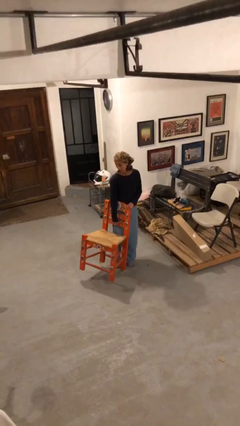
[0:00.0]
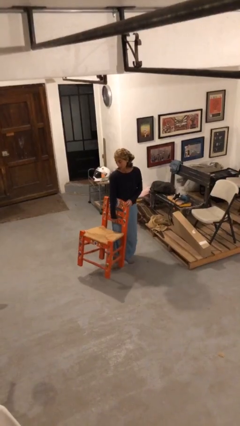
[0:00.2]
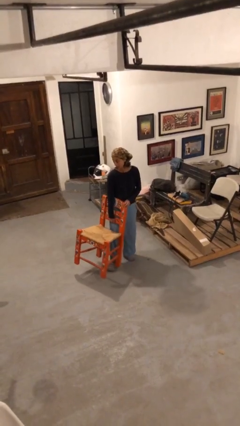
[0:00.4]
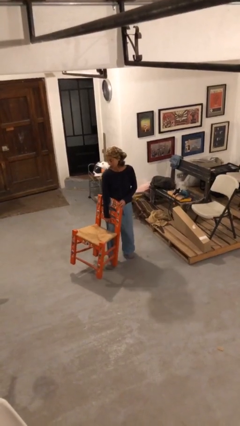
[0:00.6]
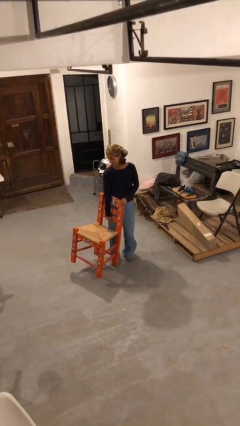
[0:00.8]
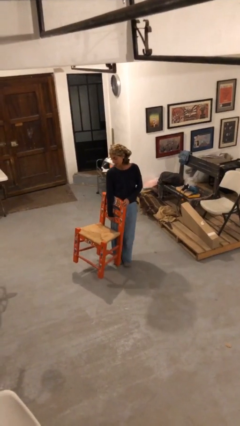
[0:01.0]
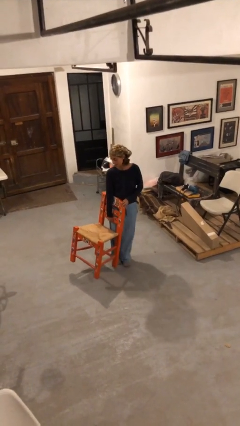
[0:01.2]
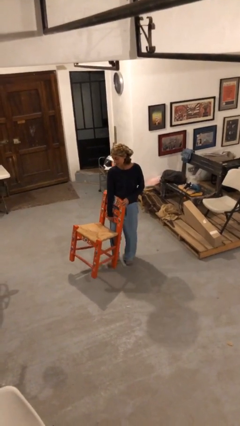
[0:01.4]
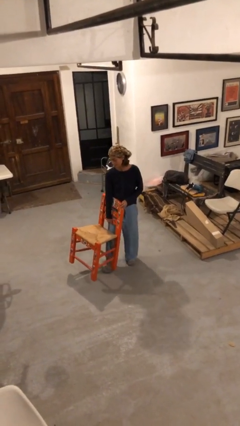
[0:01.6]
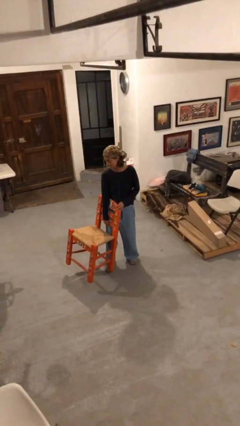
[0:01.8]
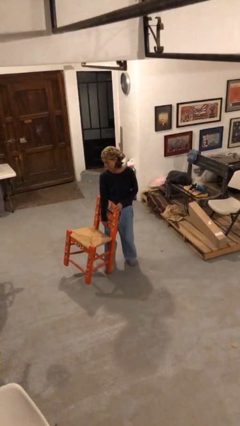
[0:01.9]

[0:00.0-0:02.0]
person carries heavy object

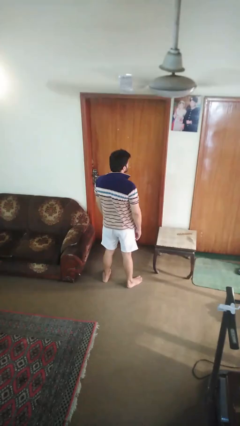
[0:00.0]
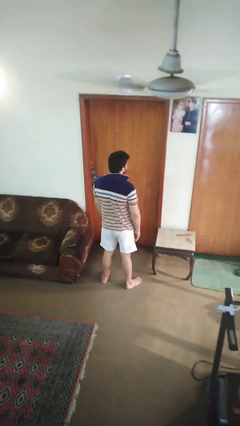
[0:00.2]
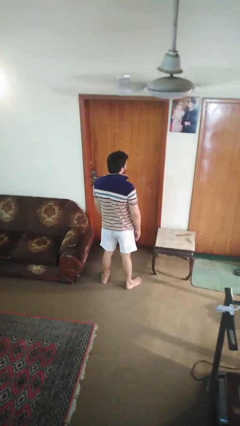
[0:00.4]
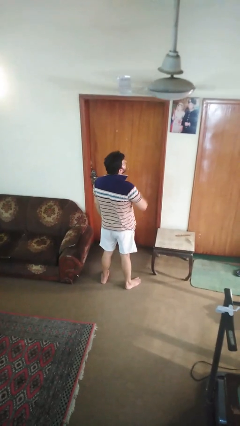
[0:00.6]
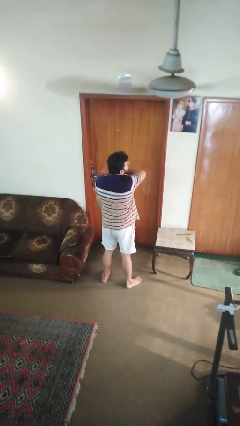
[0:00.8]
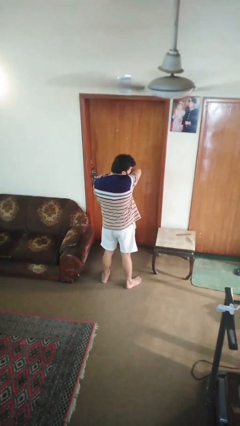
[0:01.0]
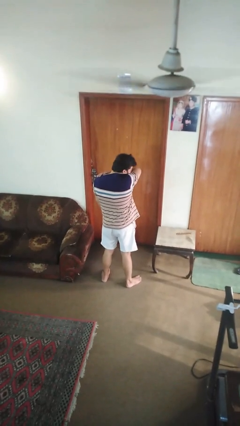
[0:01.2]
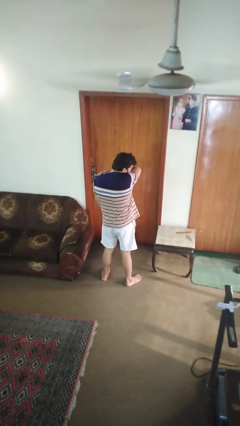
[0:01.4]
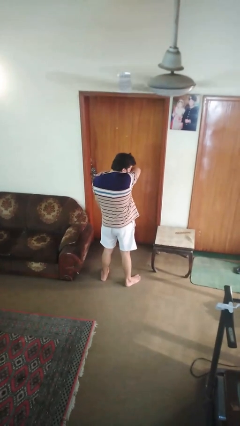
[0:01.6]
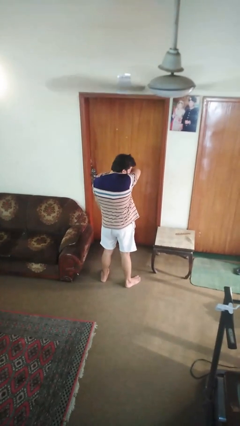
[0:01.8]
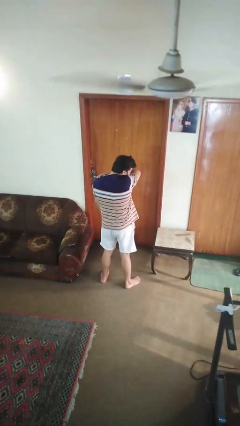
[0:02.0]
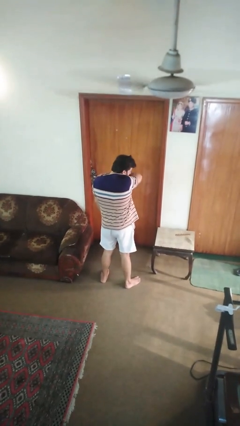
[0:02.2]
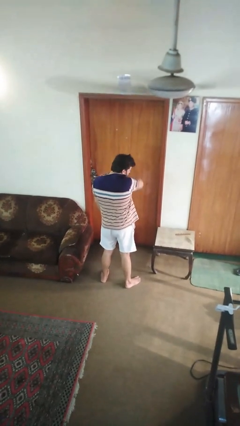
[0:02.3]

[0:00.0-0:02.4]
person sneezes into arm

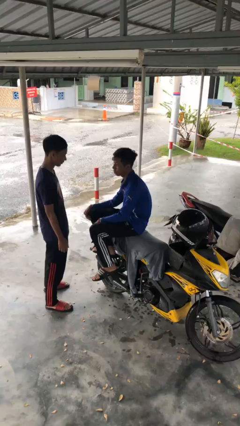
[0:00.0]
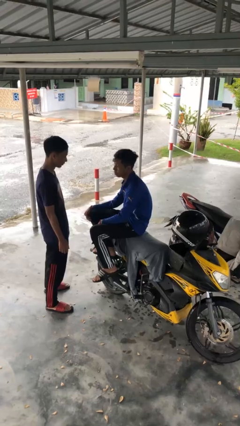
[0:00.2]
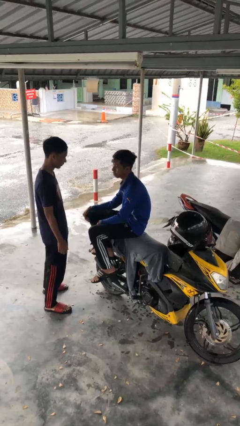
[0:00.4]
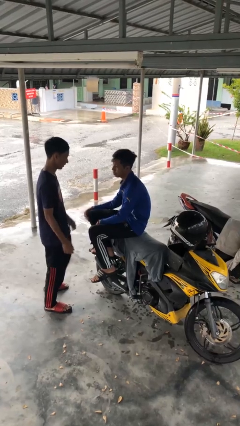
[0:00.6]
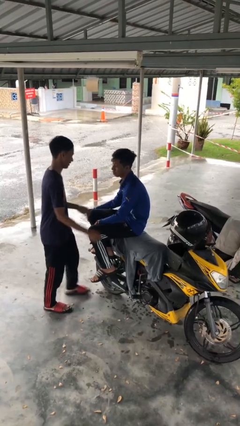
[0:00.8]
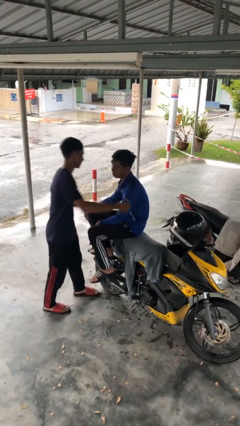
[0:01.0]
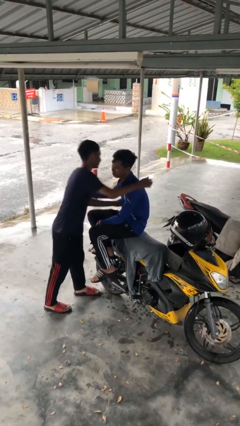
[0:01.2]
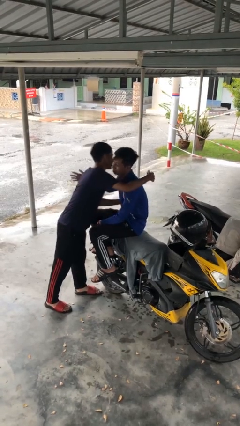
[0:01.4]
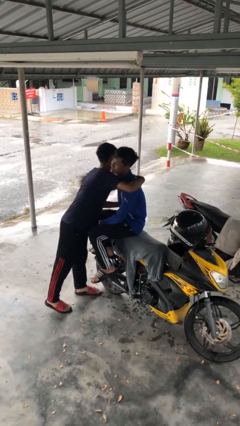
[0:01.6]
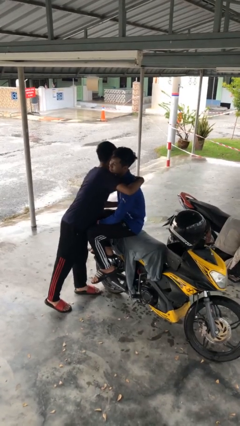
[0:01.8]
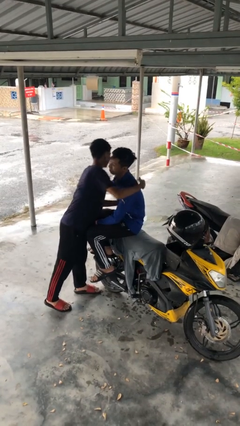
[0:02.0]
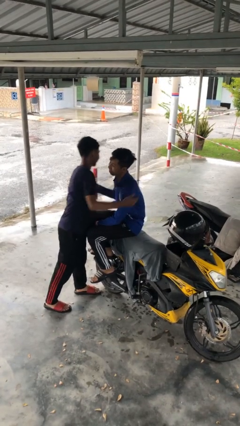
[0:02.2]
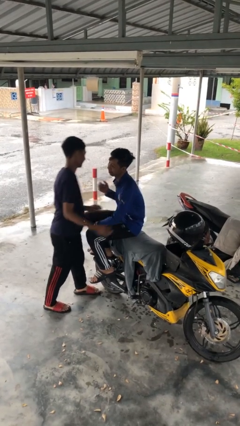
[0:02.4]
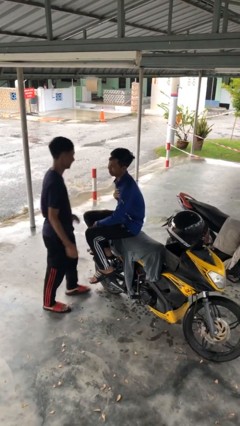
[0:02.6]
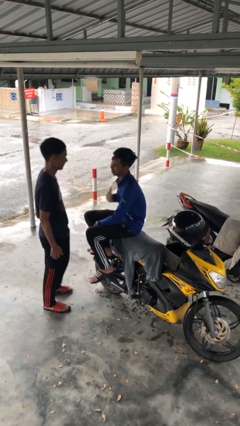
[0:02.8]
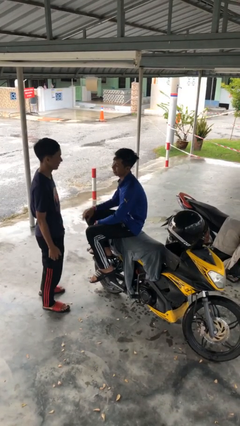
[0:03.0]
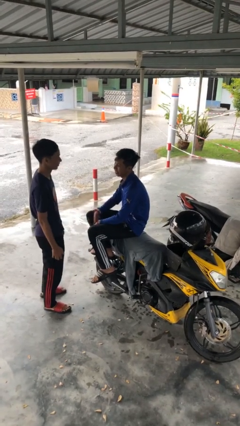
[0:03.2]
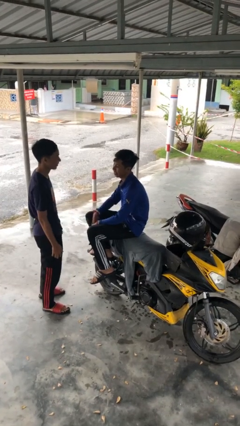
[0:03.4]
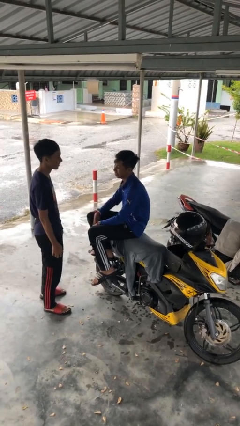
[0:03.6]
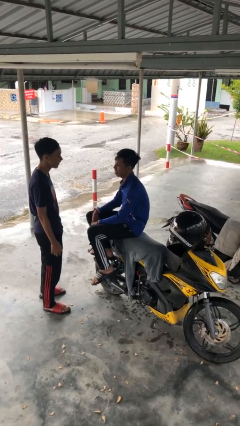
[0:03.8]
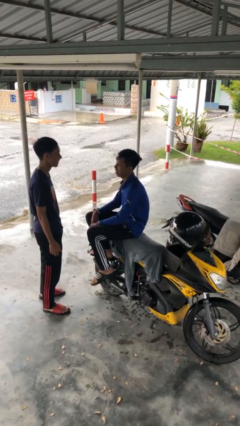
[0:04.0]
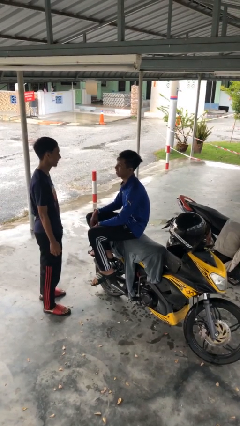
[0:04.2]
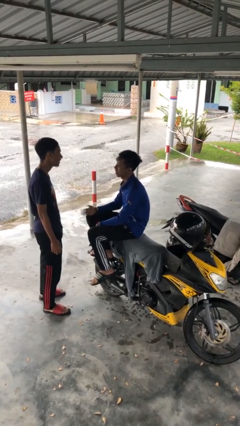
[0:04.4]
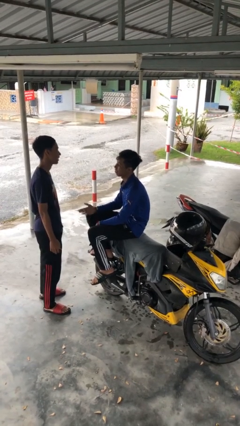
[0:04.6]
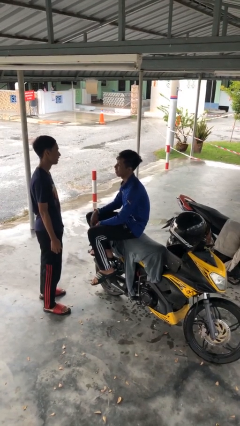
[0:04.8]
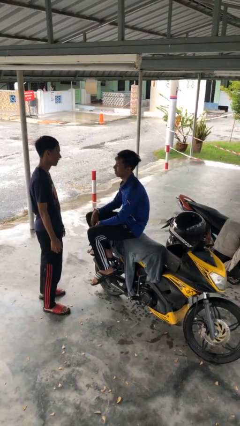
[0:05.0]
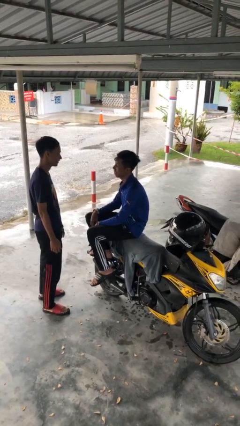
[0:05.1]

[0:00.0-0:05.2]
person embraces person

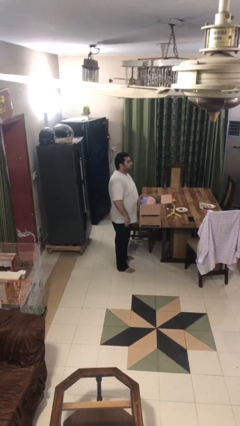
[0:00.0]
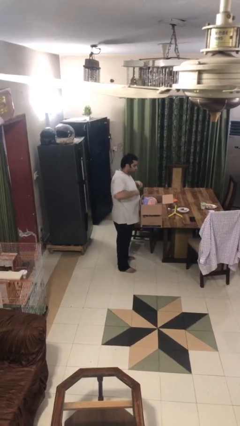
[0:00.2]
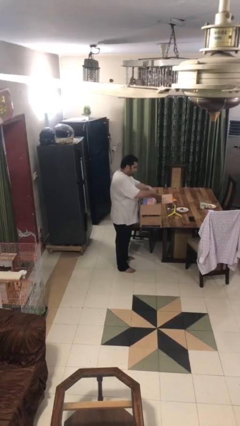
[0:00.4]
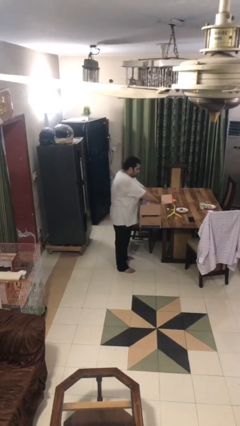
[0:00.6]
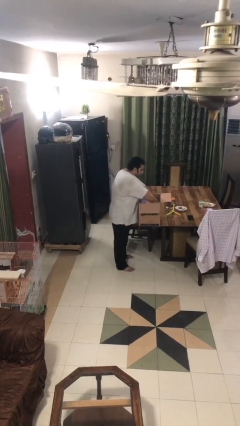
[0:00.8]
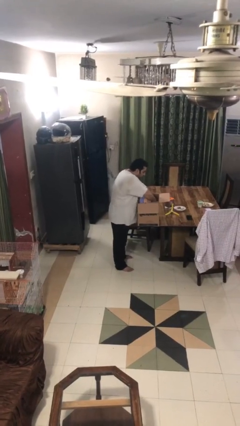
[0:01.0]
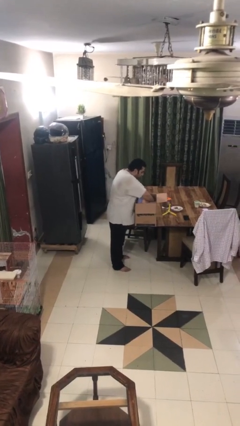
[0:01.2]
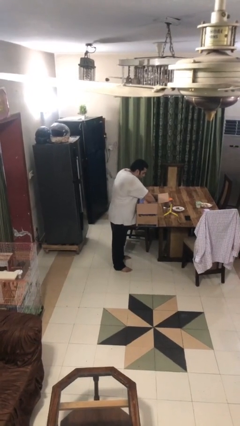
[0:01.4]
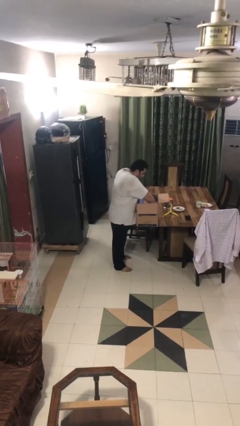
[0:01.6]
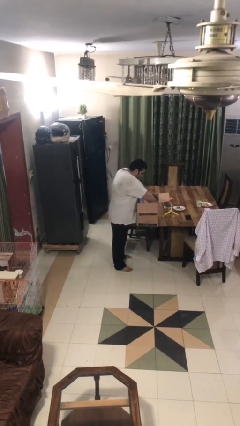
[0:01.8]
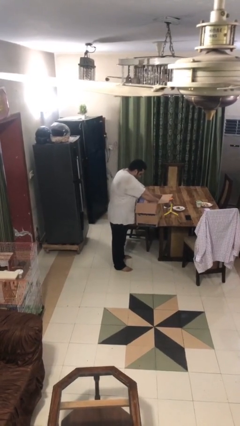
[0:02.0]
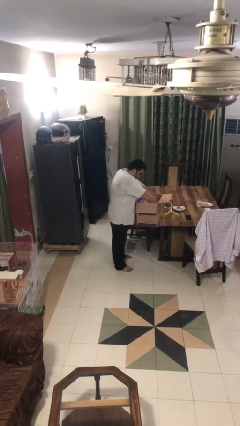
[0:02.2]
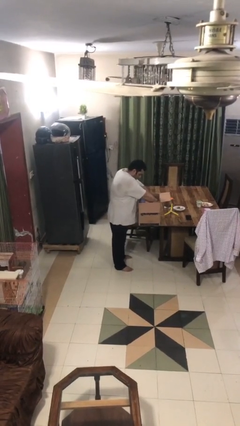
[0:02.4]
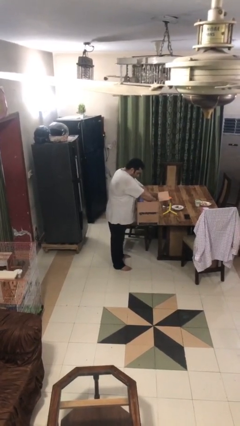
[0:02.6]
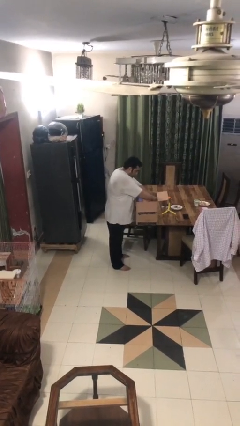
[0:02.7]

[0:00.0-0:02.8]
person searches in box

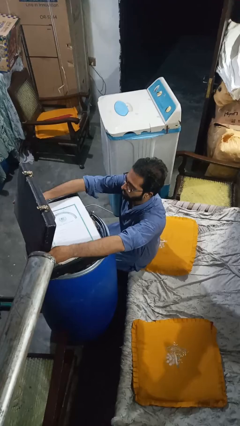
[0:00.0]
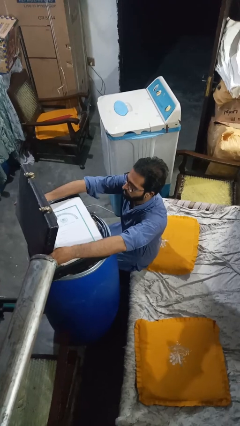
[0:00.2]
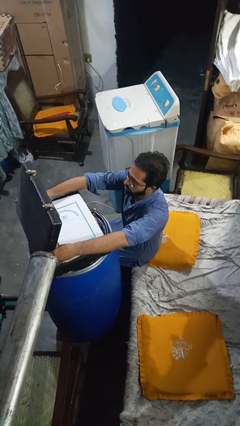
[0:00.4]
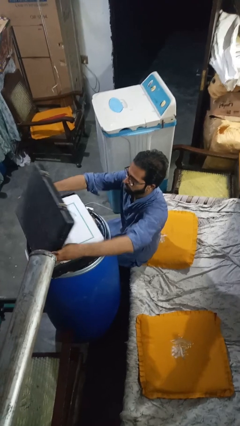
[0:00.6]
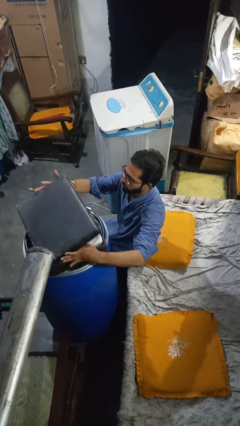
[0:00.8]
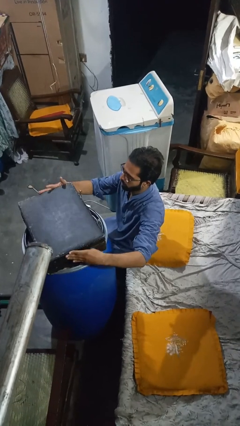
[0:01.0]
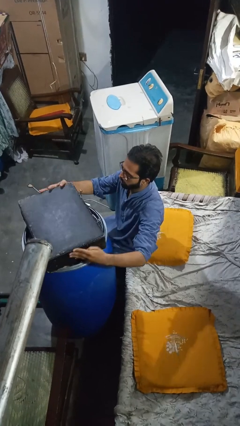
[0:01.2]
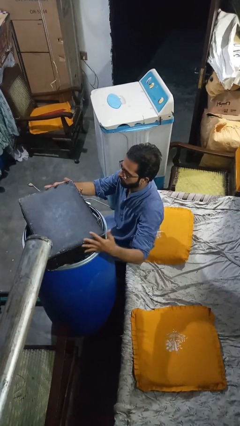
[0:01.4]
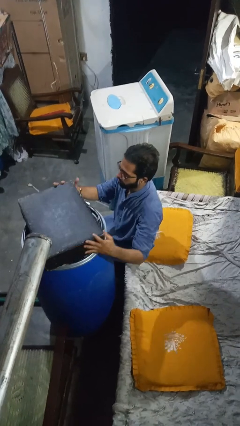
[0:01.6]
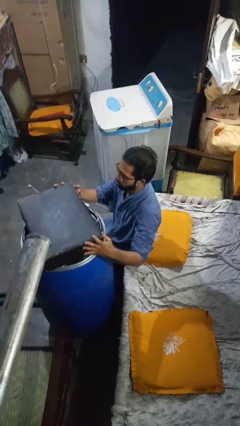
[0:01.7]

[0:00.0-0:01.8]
person closes suitcase

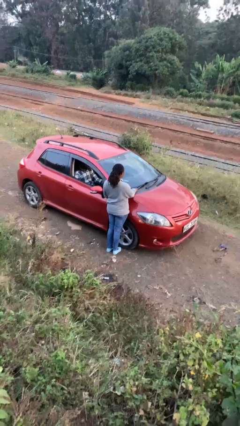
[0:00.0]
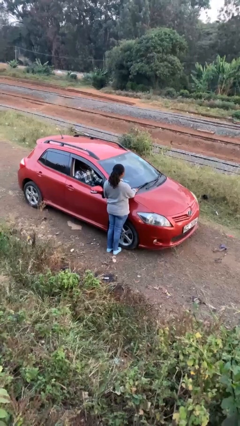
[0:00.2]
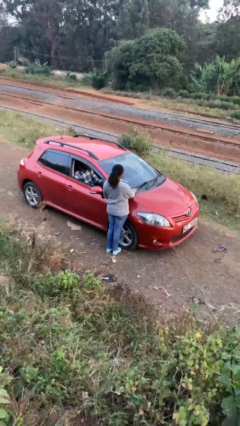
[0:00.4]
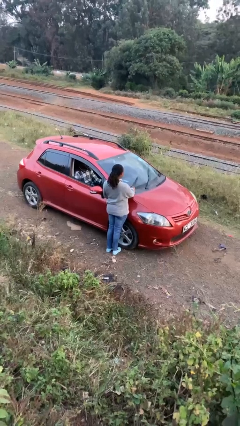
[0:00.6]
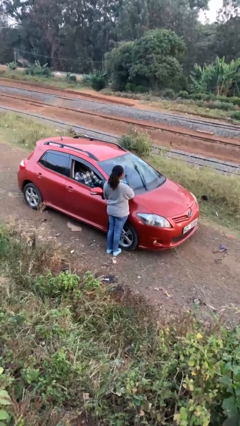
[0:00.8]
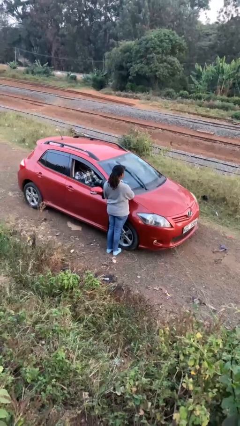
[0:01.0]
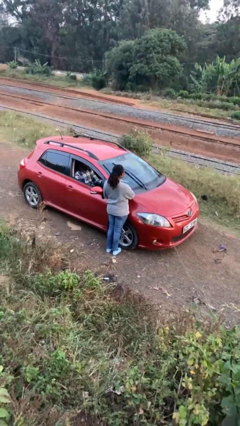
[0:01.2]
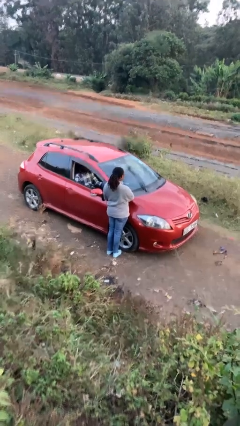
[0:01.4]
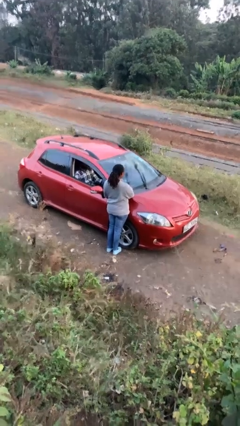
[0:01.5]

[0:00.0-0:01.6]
person flips up car wipers

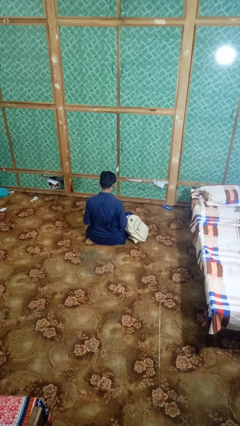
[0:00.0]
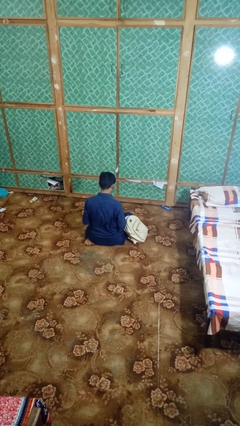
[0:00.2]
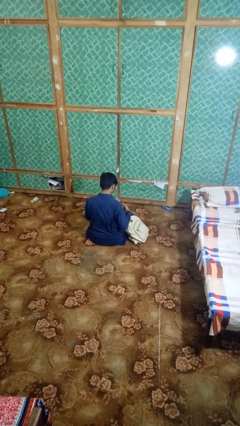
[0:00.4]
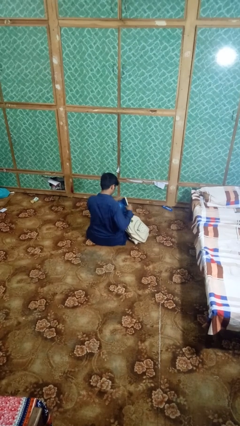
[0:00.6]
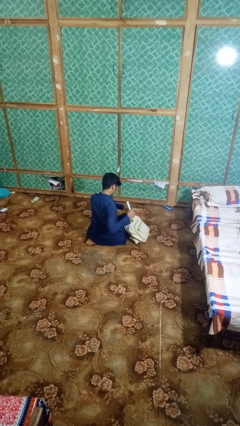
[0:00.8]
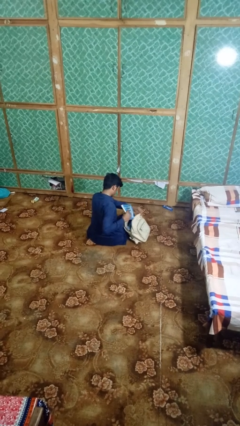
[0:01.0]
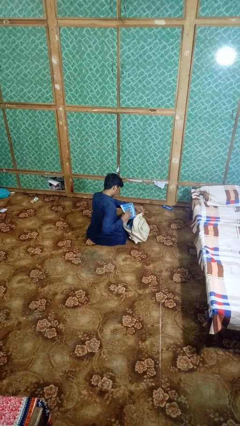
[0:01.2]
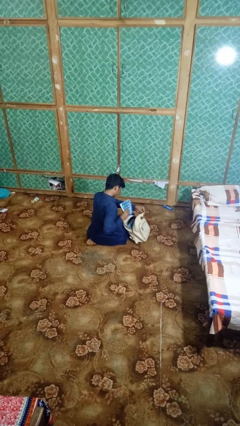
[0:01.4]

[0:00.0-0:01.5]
person puts object into backpack
